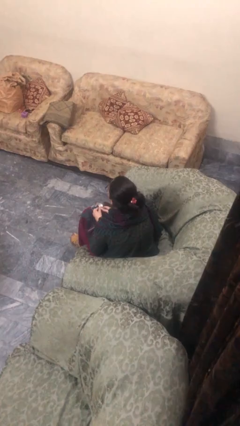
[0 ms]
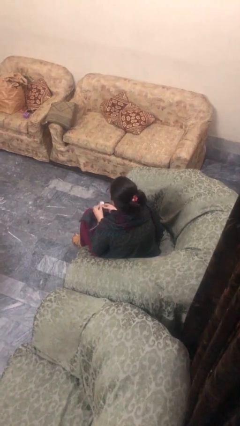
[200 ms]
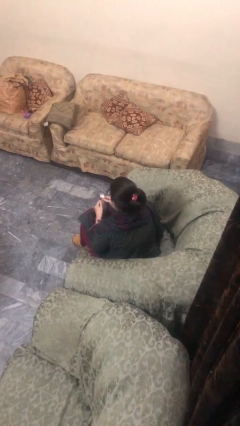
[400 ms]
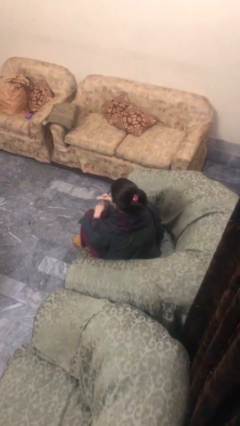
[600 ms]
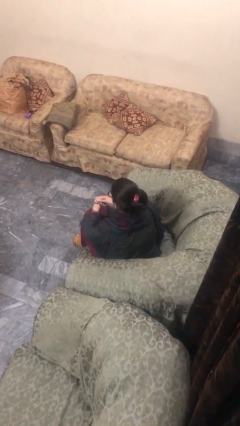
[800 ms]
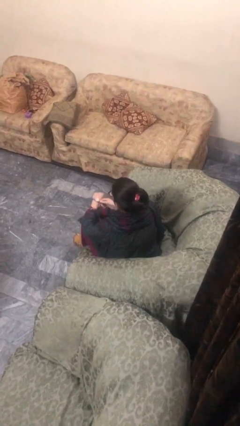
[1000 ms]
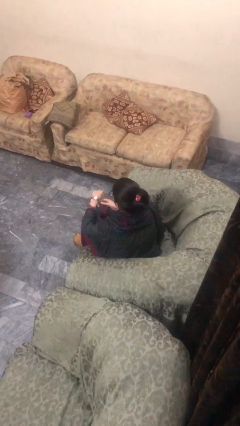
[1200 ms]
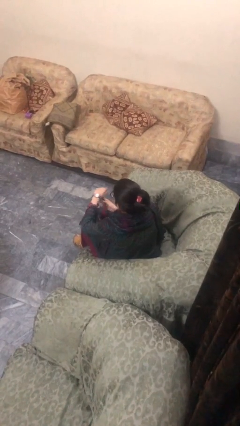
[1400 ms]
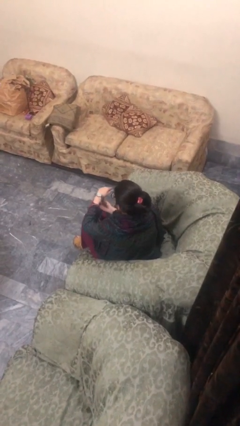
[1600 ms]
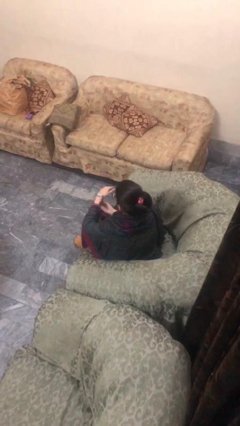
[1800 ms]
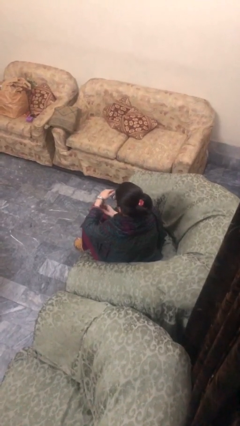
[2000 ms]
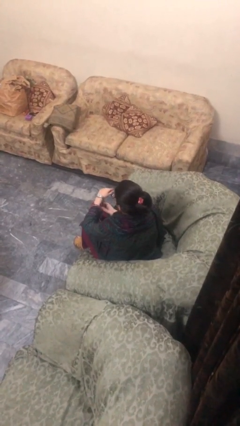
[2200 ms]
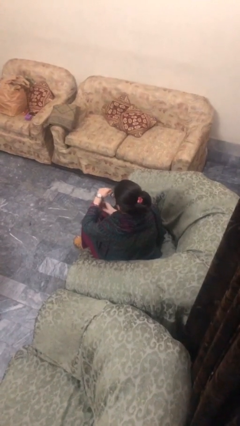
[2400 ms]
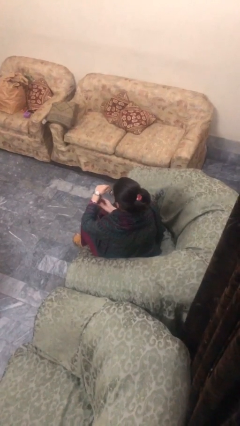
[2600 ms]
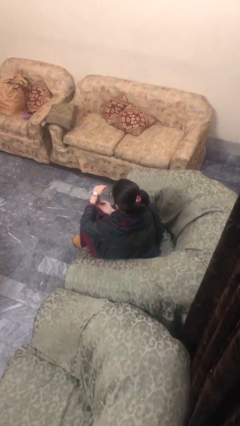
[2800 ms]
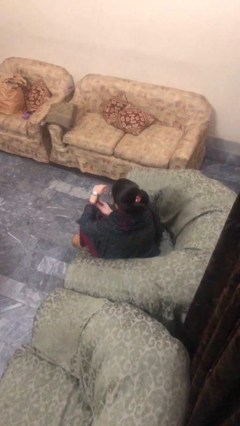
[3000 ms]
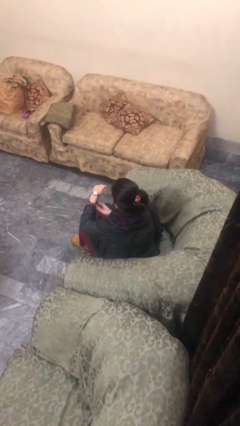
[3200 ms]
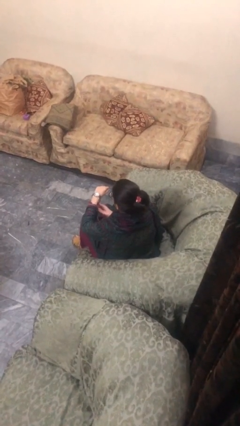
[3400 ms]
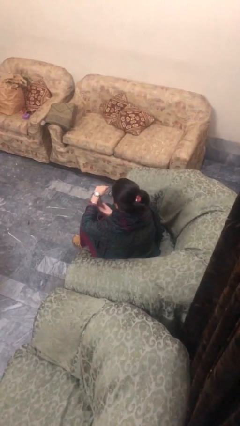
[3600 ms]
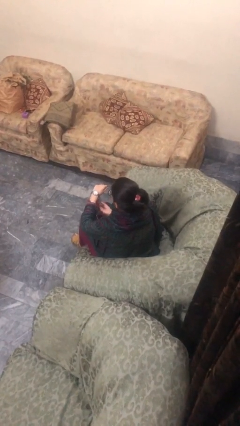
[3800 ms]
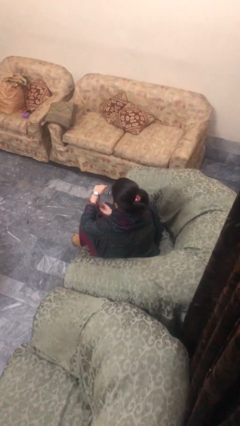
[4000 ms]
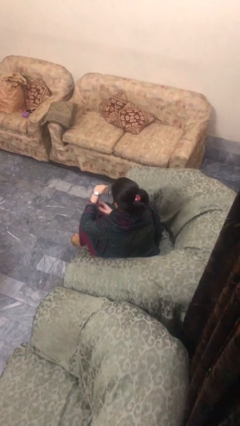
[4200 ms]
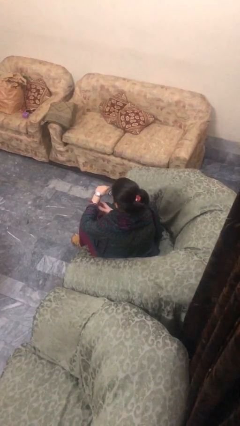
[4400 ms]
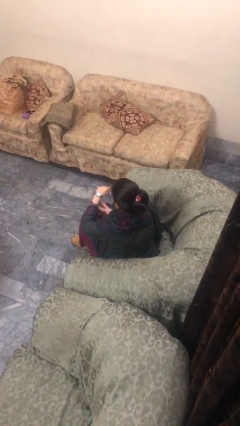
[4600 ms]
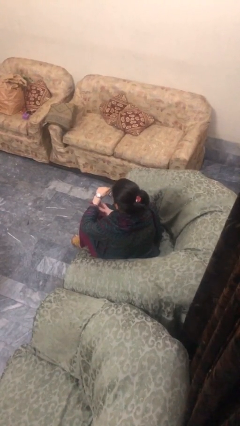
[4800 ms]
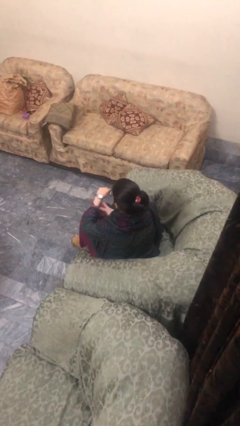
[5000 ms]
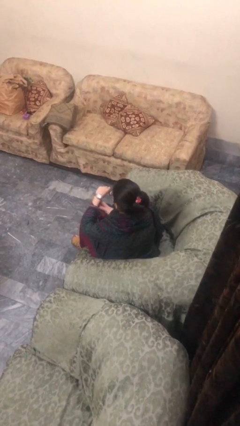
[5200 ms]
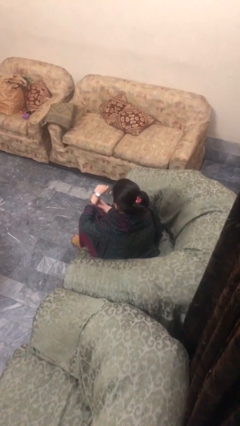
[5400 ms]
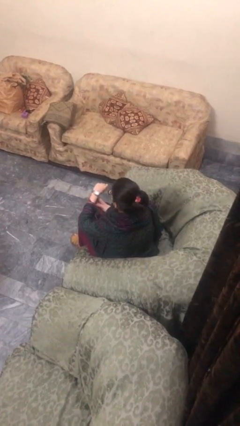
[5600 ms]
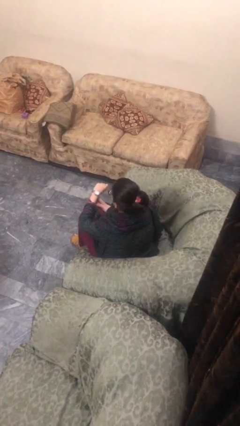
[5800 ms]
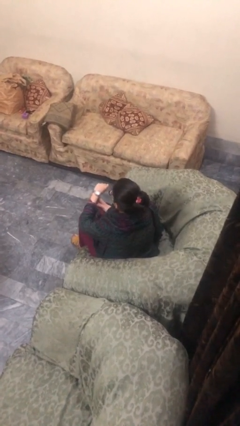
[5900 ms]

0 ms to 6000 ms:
person puts on wristwatch

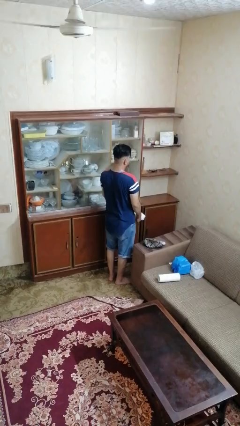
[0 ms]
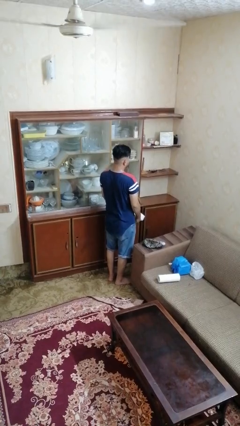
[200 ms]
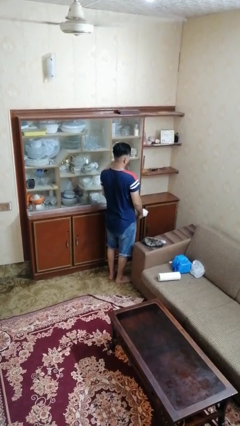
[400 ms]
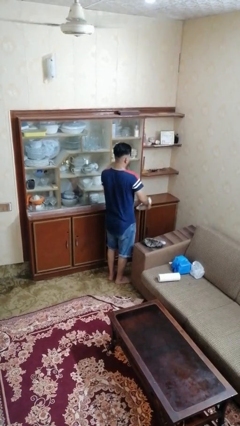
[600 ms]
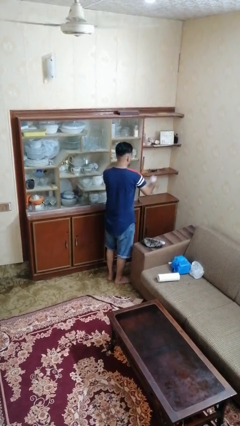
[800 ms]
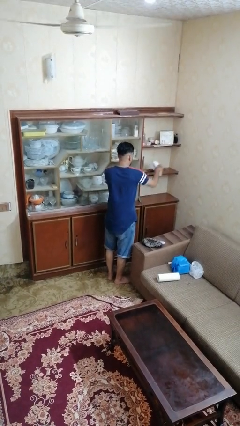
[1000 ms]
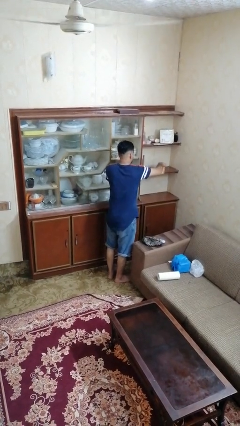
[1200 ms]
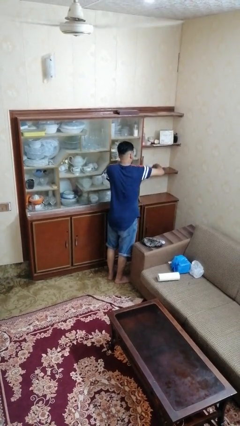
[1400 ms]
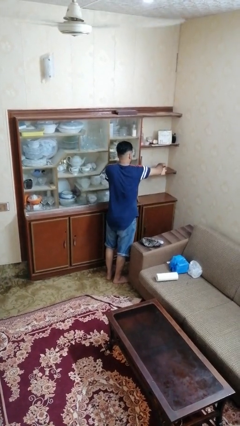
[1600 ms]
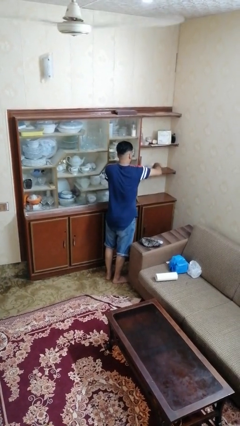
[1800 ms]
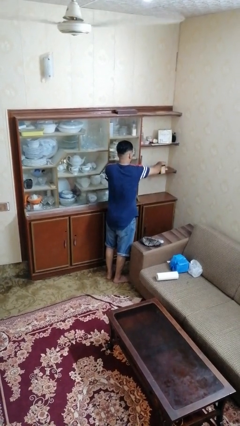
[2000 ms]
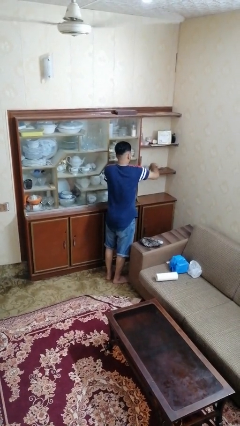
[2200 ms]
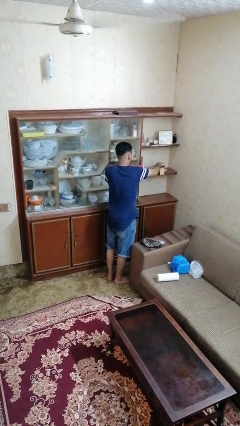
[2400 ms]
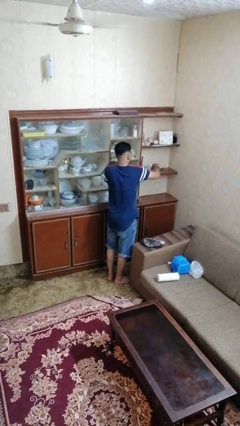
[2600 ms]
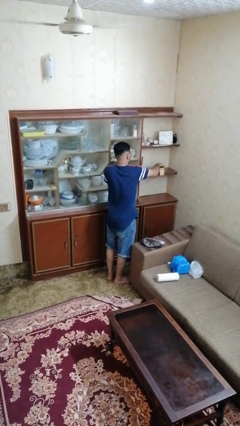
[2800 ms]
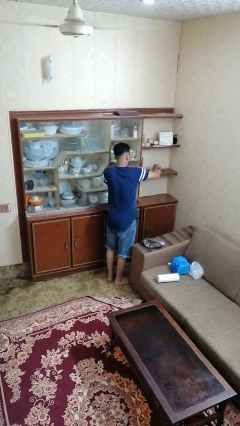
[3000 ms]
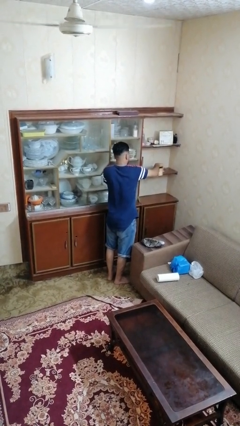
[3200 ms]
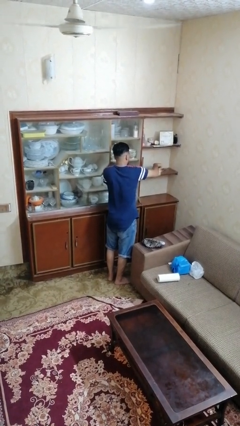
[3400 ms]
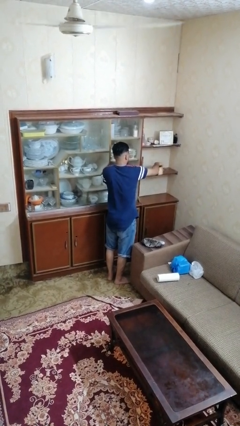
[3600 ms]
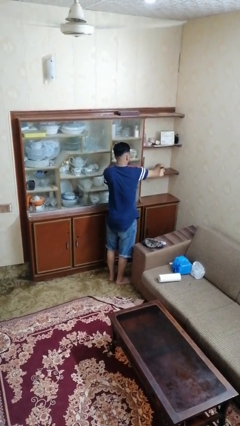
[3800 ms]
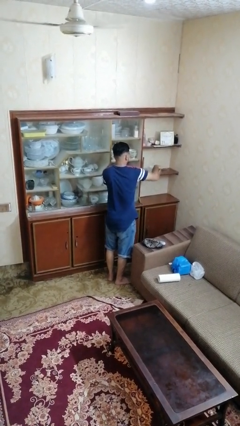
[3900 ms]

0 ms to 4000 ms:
person dusts furniture

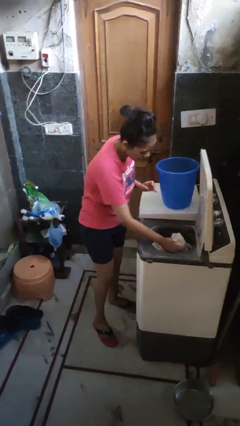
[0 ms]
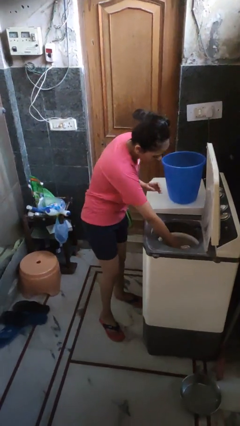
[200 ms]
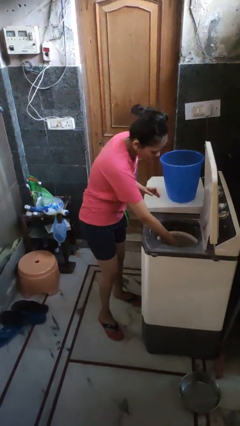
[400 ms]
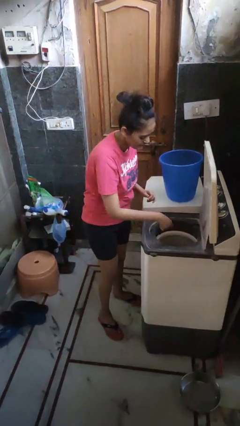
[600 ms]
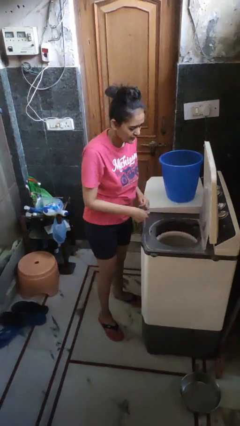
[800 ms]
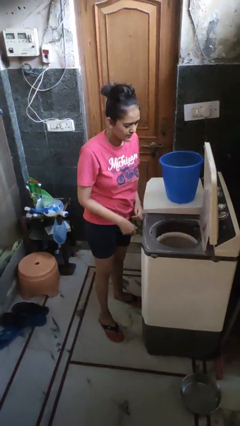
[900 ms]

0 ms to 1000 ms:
person puts clothes into dresser

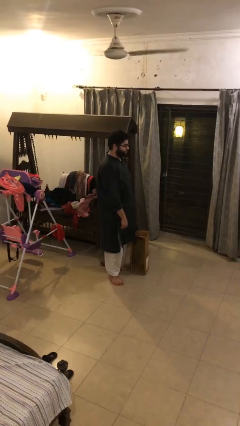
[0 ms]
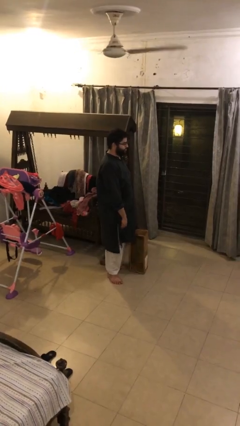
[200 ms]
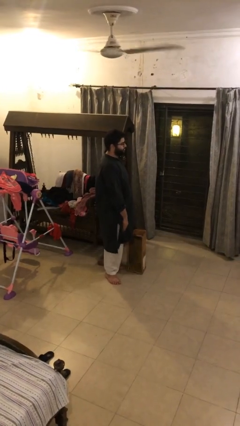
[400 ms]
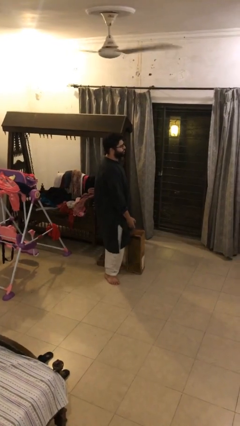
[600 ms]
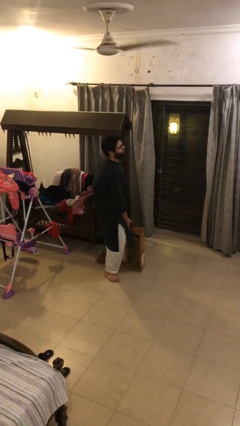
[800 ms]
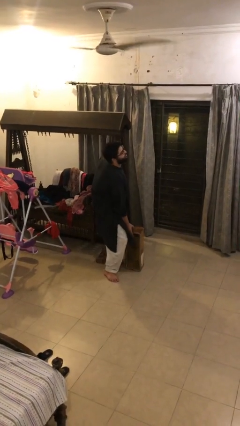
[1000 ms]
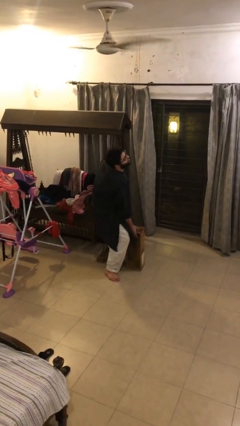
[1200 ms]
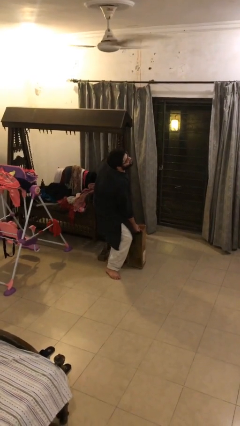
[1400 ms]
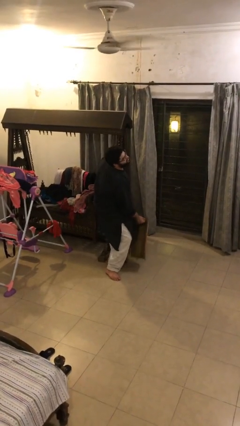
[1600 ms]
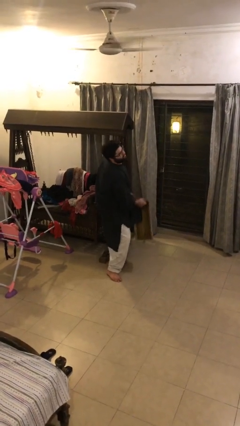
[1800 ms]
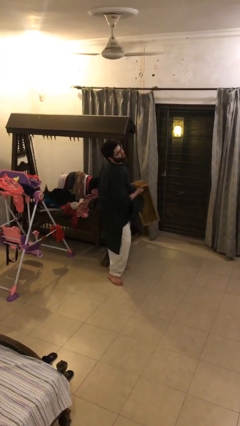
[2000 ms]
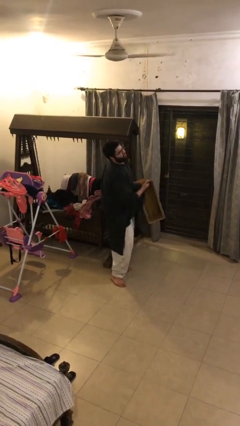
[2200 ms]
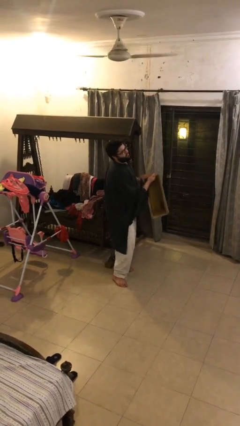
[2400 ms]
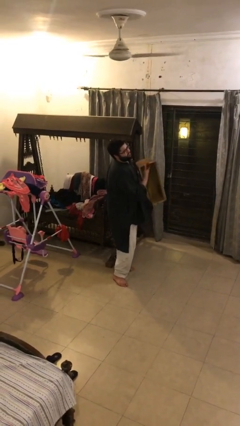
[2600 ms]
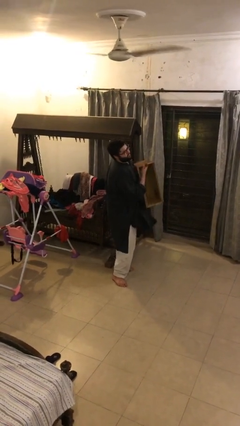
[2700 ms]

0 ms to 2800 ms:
person picks up object from floor

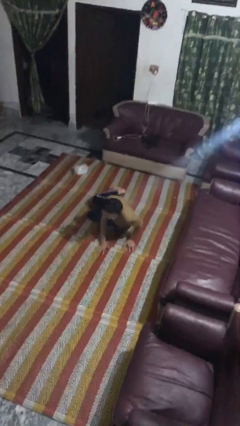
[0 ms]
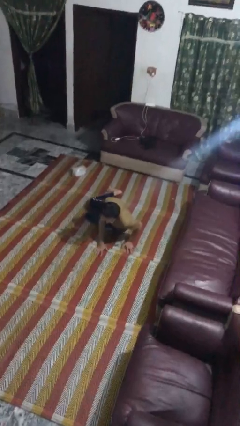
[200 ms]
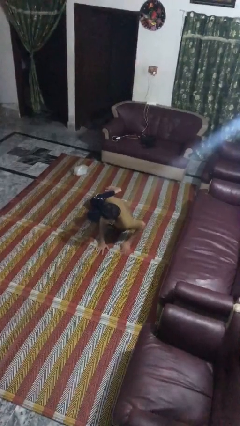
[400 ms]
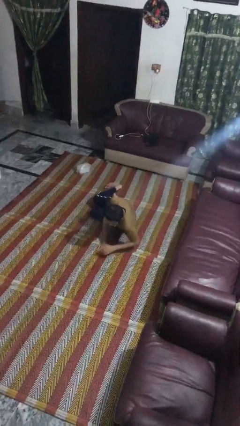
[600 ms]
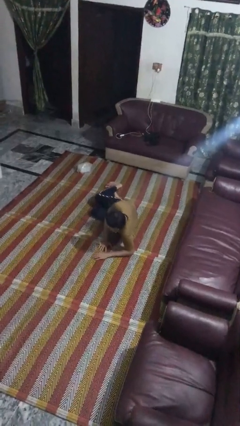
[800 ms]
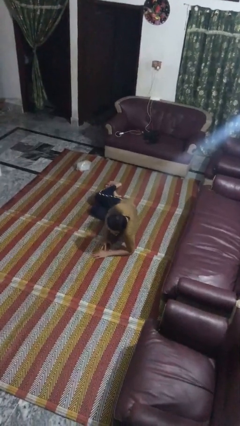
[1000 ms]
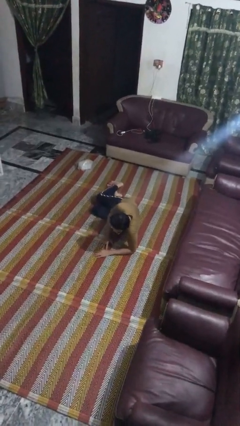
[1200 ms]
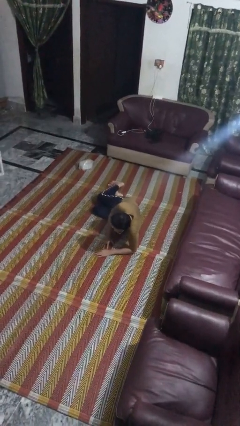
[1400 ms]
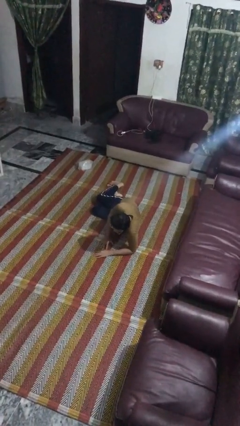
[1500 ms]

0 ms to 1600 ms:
person lies down on floor

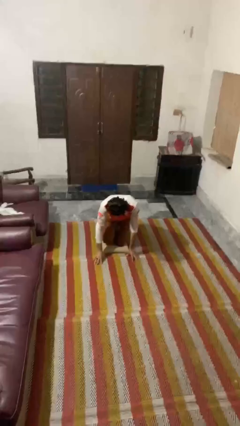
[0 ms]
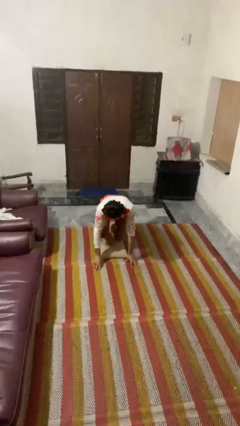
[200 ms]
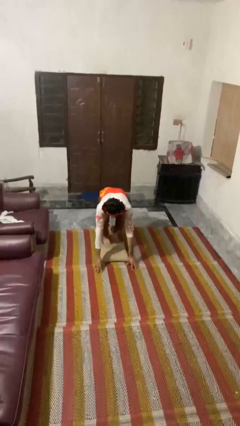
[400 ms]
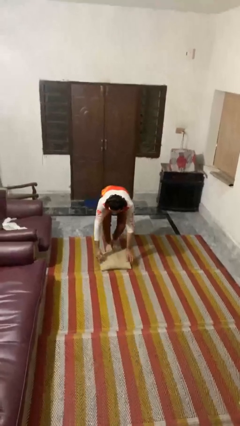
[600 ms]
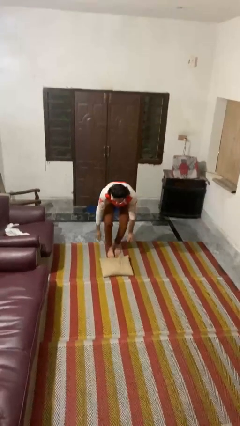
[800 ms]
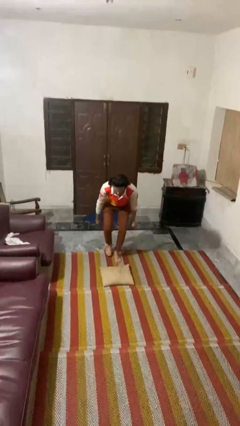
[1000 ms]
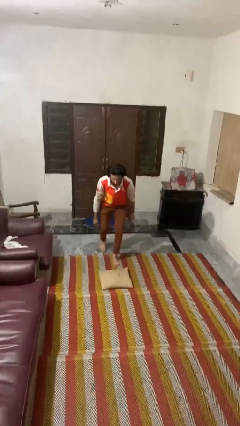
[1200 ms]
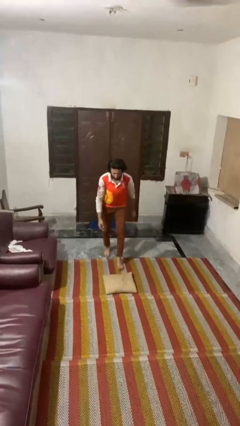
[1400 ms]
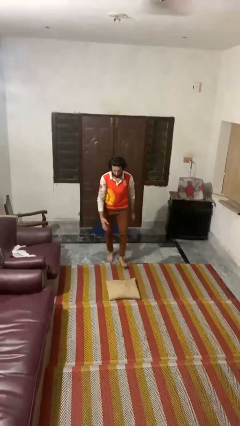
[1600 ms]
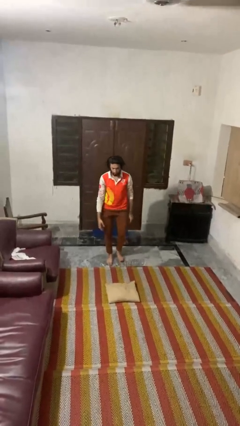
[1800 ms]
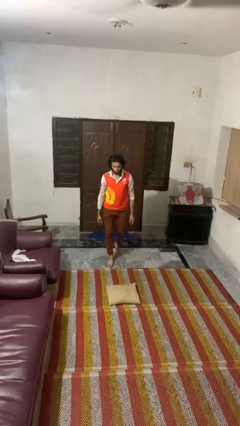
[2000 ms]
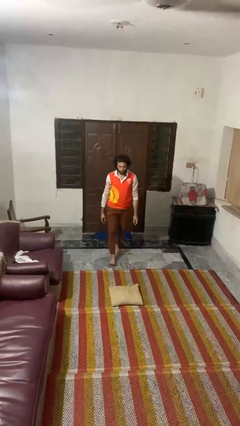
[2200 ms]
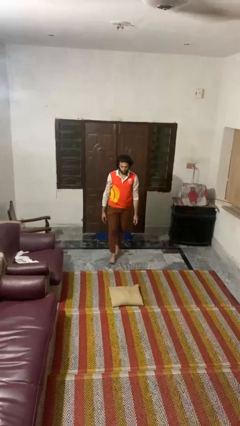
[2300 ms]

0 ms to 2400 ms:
person stands up from floor
